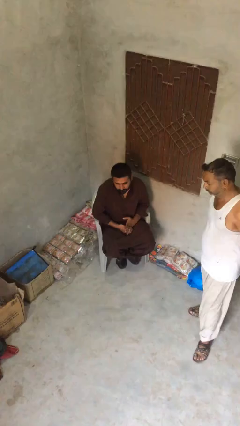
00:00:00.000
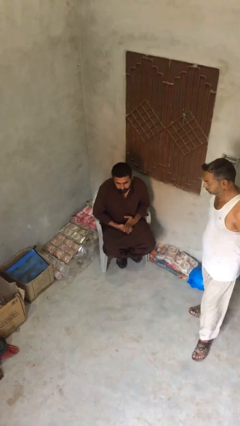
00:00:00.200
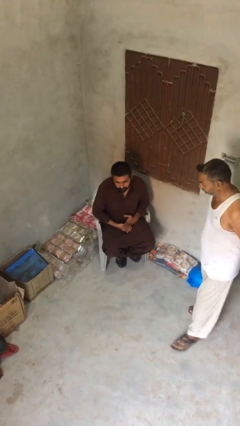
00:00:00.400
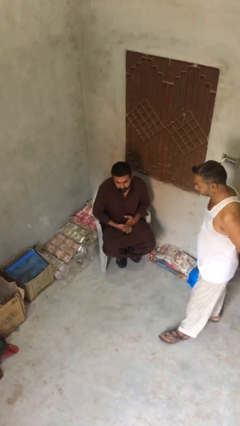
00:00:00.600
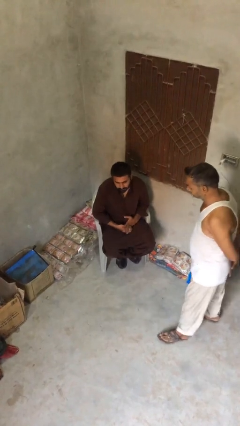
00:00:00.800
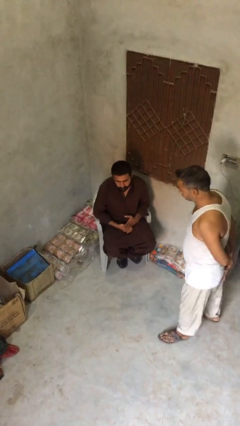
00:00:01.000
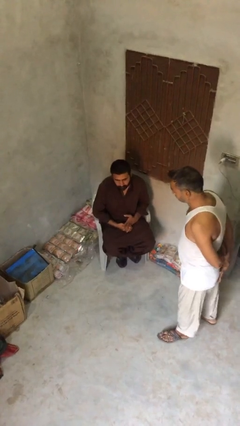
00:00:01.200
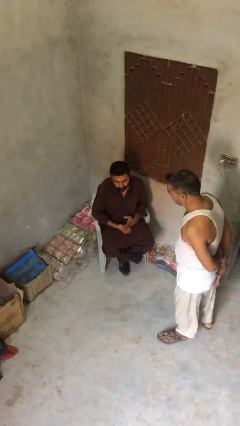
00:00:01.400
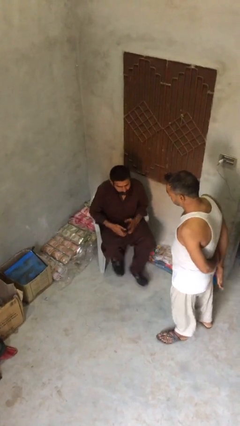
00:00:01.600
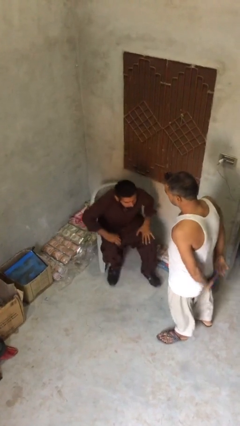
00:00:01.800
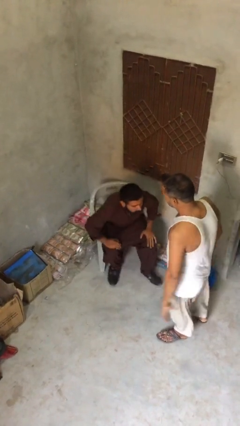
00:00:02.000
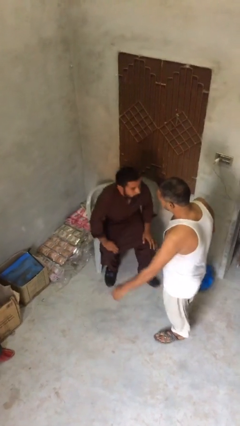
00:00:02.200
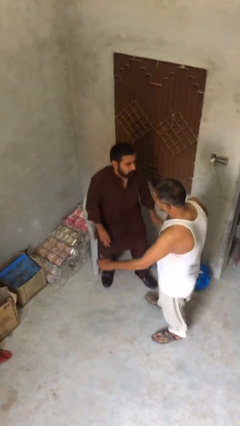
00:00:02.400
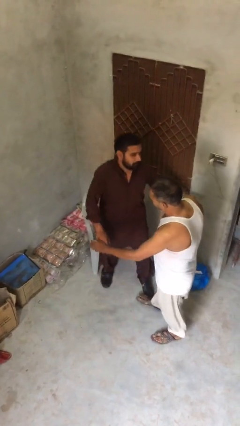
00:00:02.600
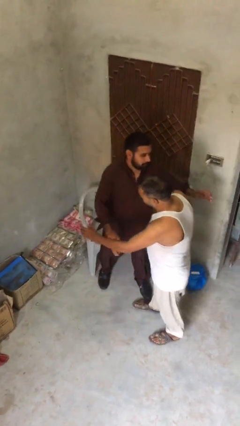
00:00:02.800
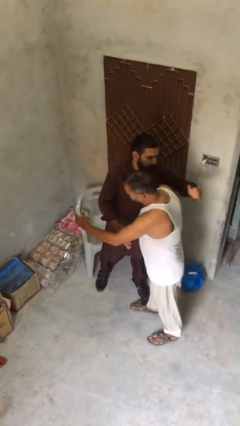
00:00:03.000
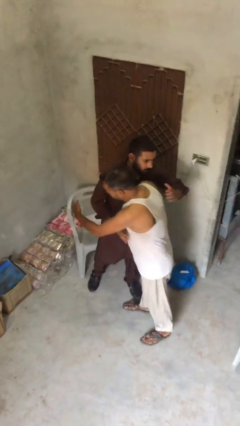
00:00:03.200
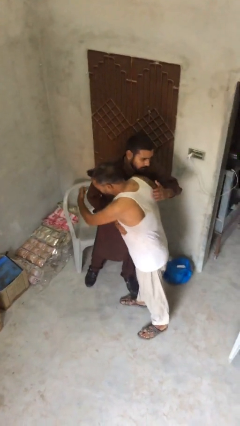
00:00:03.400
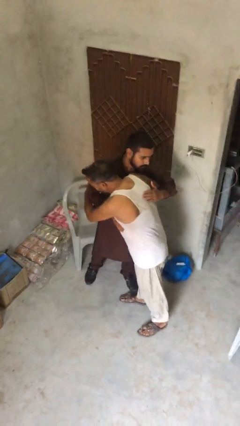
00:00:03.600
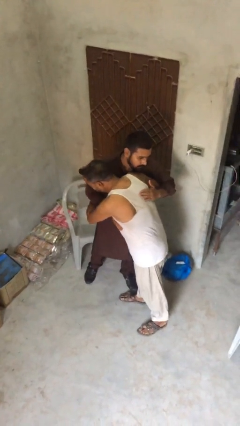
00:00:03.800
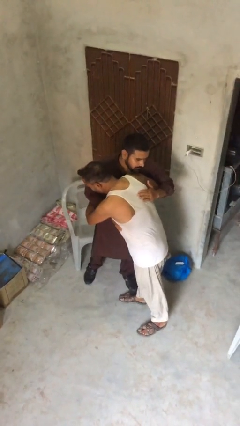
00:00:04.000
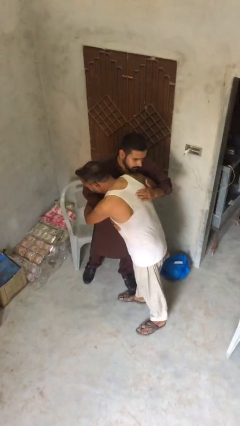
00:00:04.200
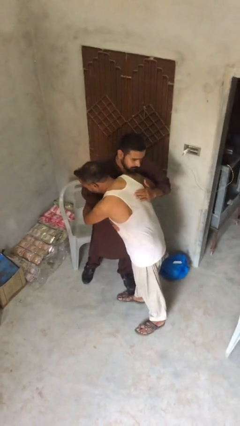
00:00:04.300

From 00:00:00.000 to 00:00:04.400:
person embraces person

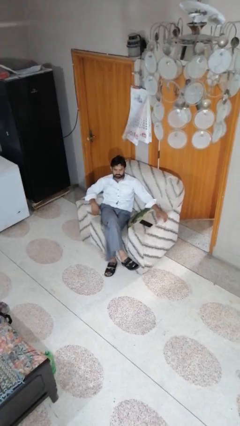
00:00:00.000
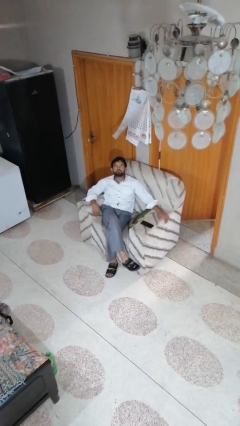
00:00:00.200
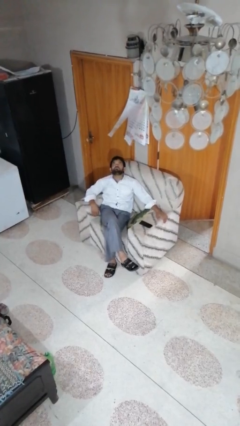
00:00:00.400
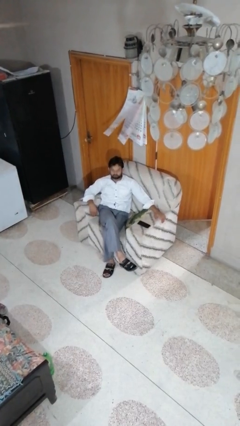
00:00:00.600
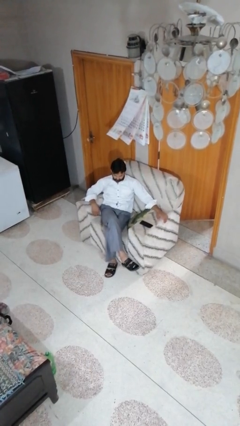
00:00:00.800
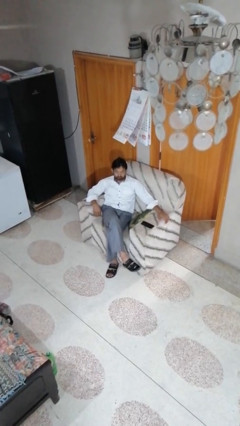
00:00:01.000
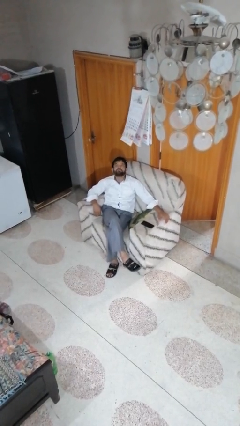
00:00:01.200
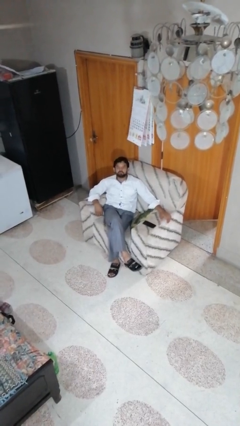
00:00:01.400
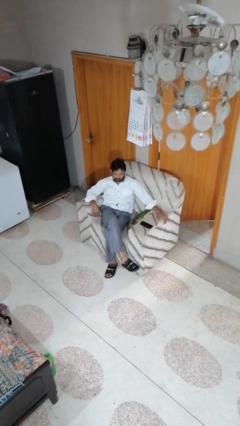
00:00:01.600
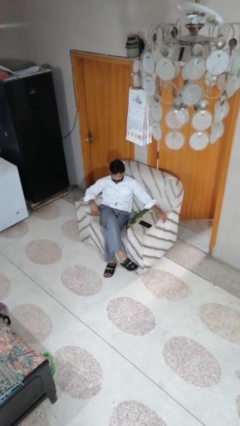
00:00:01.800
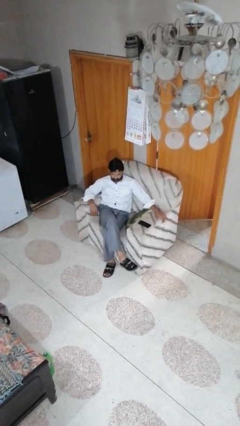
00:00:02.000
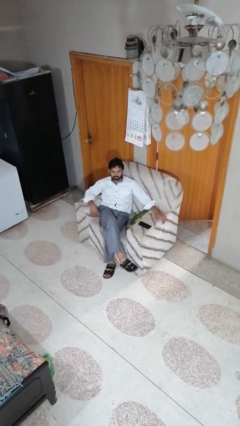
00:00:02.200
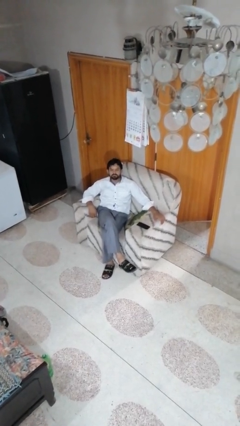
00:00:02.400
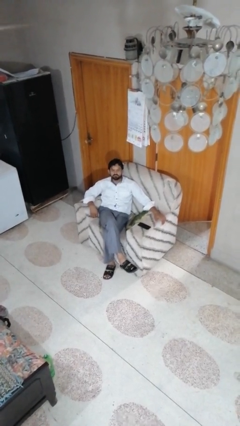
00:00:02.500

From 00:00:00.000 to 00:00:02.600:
person nods head

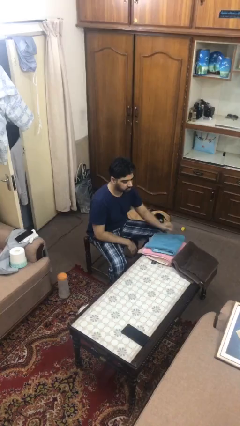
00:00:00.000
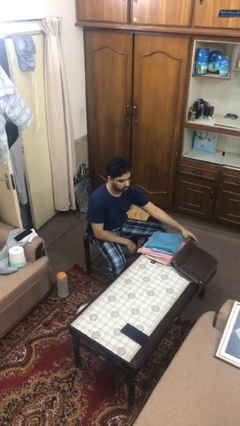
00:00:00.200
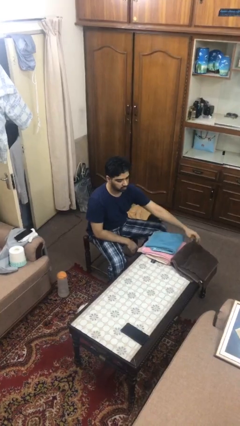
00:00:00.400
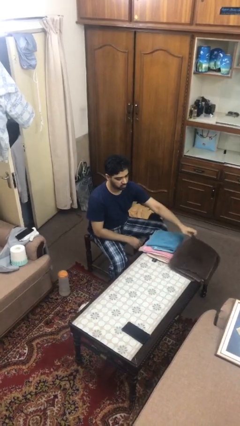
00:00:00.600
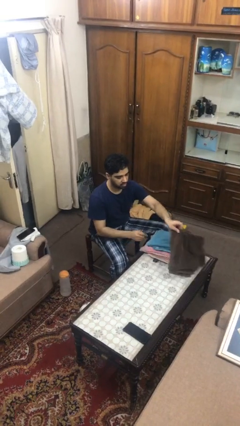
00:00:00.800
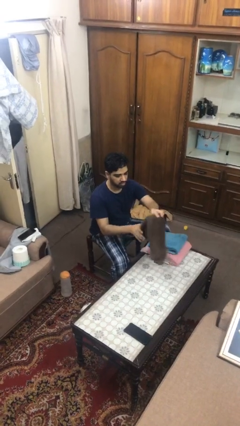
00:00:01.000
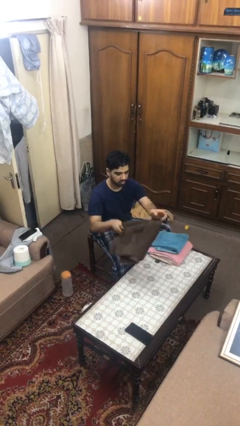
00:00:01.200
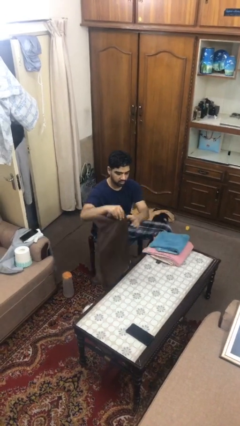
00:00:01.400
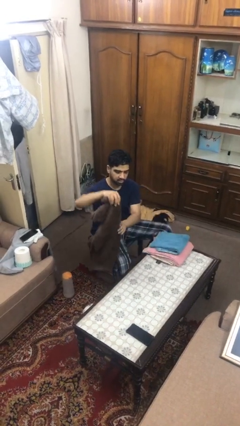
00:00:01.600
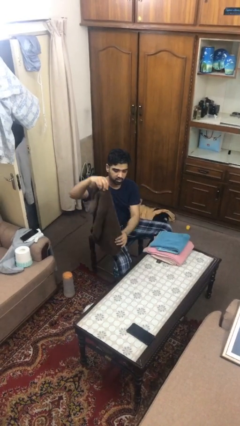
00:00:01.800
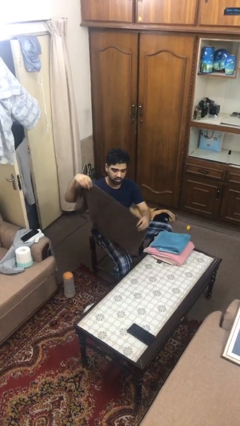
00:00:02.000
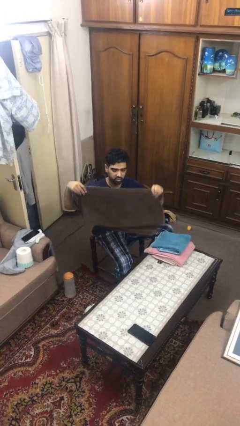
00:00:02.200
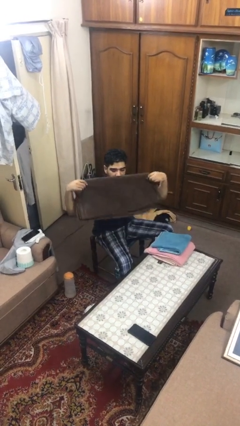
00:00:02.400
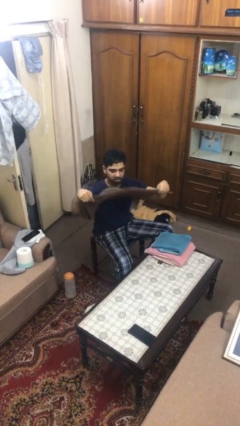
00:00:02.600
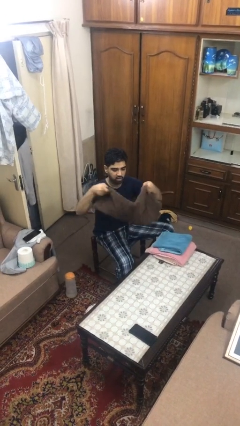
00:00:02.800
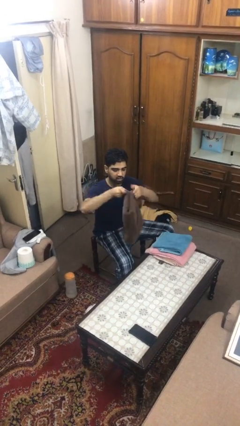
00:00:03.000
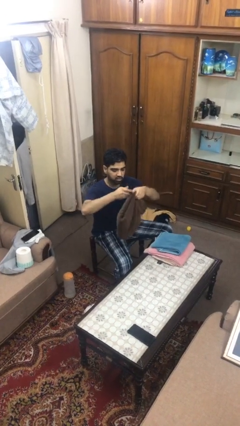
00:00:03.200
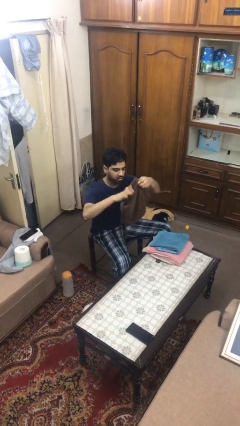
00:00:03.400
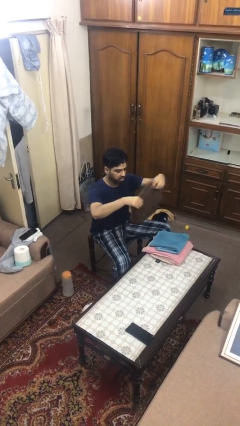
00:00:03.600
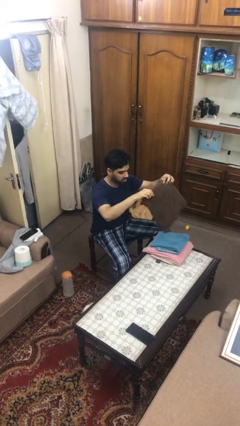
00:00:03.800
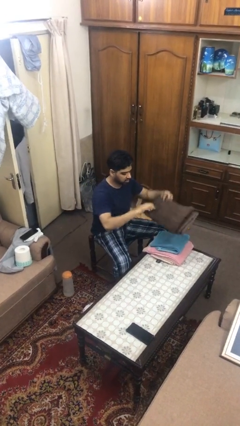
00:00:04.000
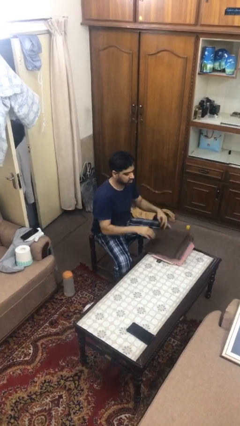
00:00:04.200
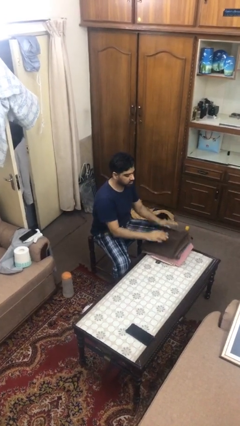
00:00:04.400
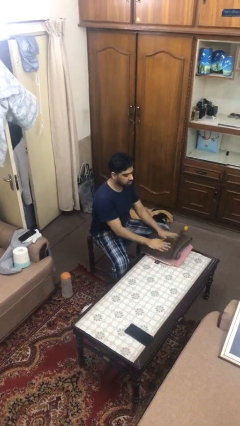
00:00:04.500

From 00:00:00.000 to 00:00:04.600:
person folds towel

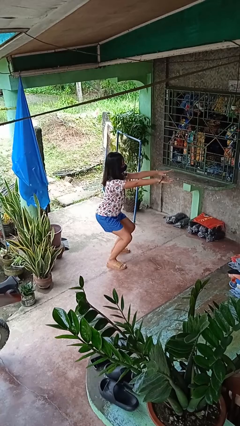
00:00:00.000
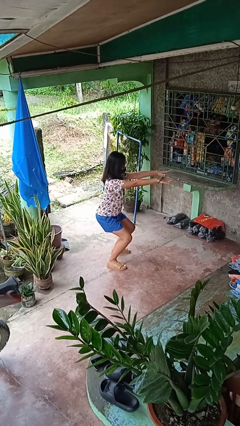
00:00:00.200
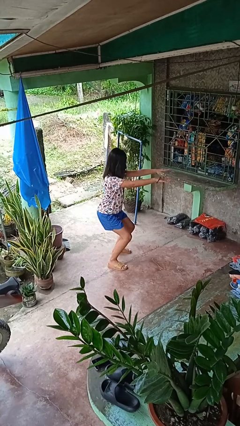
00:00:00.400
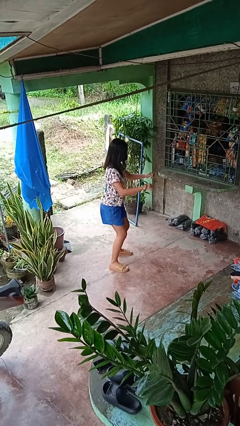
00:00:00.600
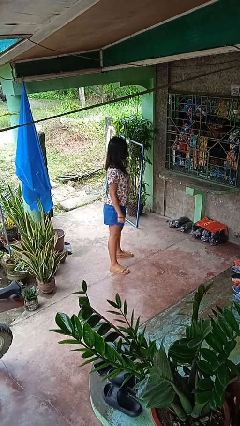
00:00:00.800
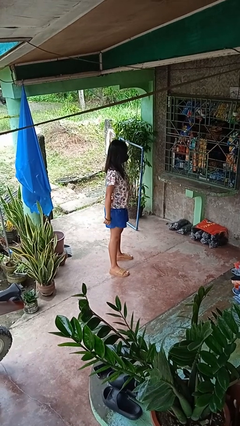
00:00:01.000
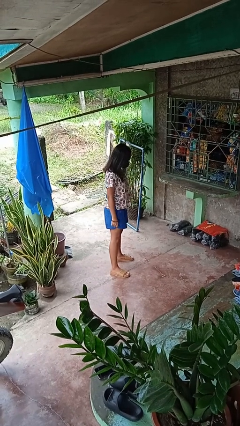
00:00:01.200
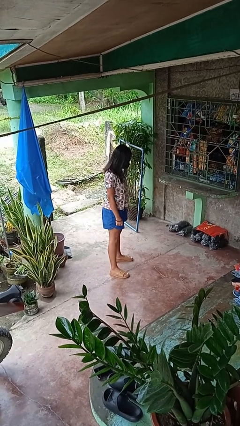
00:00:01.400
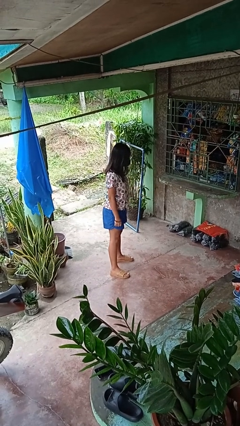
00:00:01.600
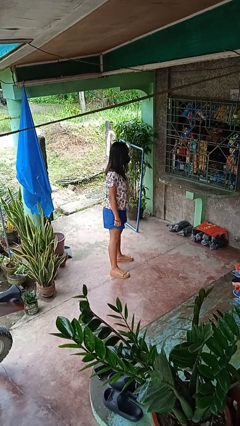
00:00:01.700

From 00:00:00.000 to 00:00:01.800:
person stands up

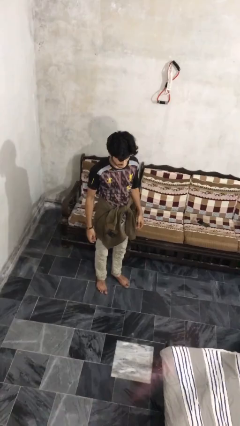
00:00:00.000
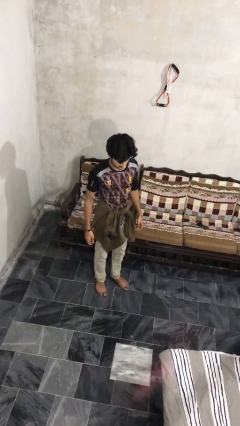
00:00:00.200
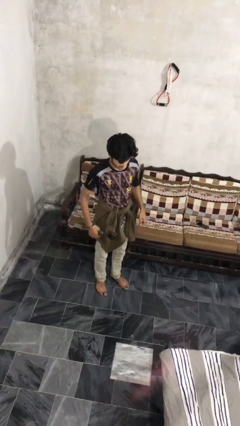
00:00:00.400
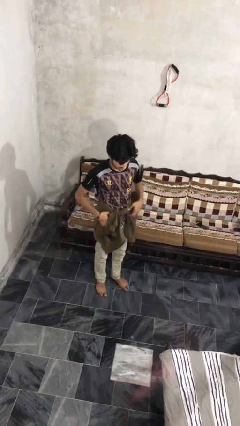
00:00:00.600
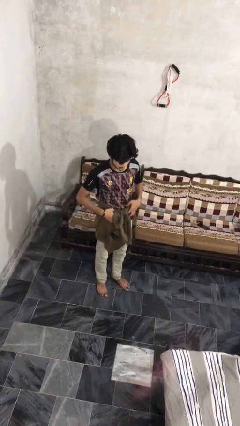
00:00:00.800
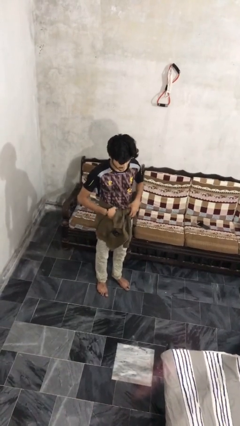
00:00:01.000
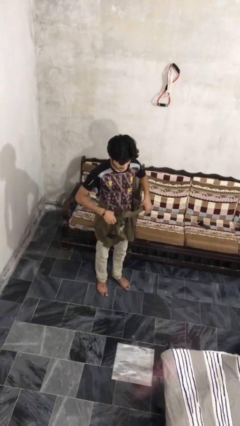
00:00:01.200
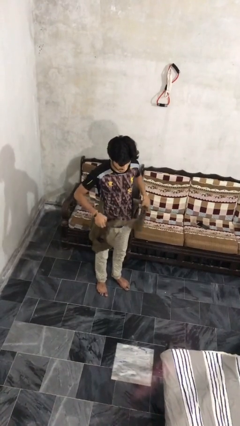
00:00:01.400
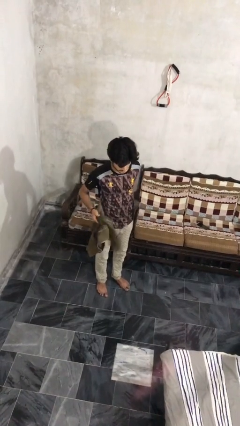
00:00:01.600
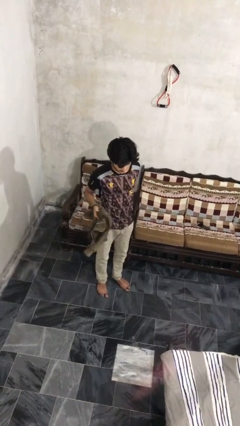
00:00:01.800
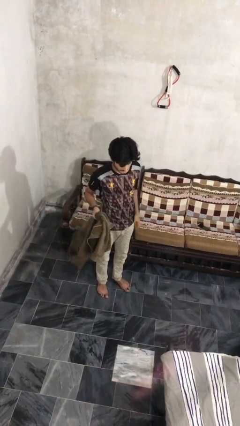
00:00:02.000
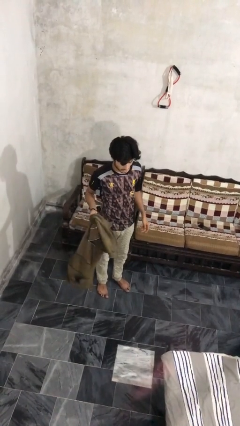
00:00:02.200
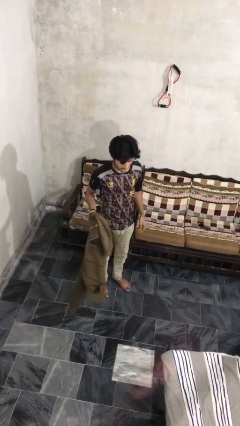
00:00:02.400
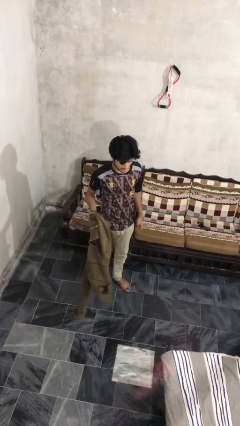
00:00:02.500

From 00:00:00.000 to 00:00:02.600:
person unties jacket around waist

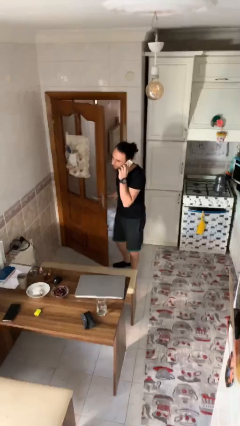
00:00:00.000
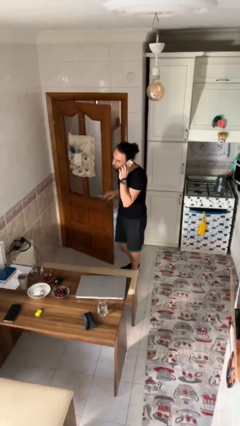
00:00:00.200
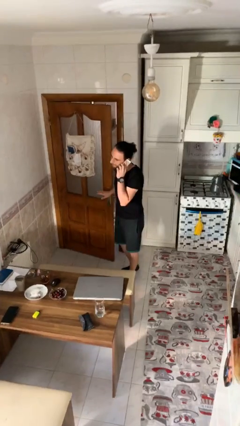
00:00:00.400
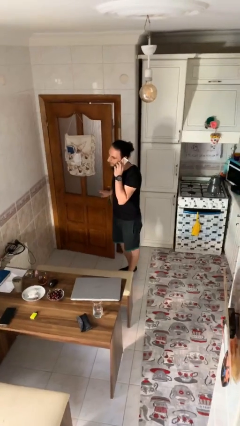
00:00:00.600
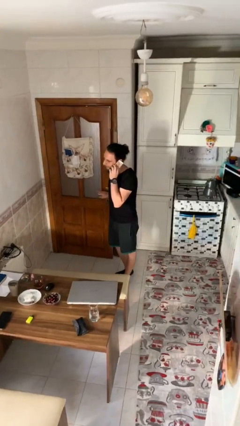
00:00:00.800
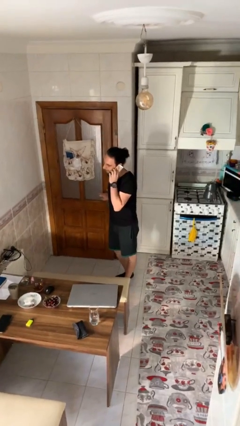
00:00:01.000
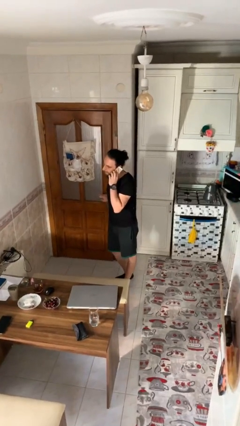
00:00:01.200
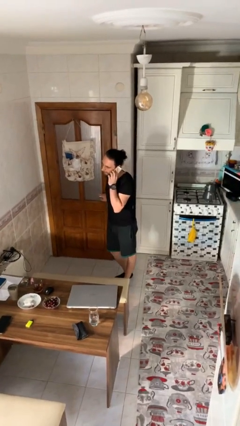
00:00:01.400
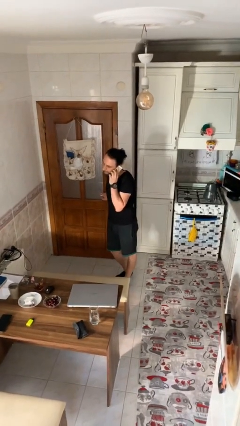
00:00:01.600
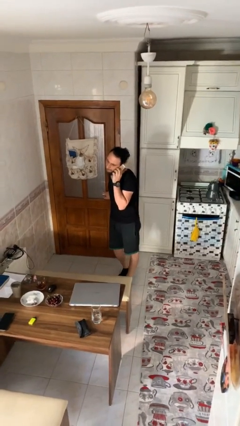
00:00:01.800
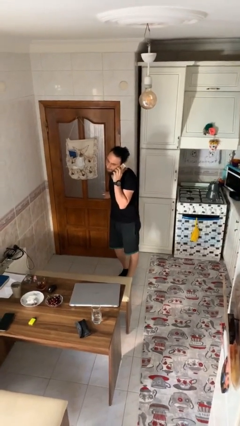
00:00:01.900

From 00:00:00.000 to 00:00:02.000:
person closes facility door
